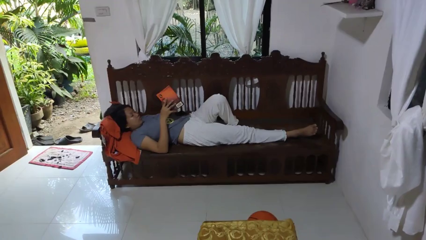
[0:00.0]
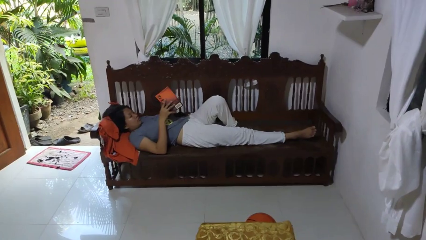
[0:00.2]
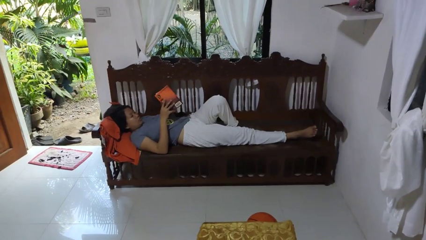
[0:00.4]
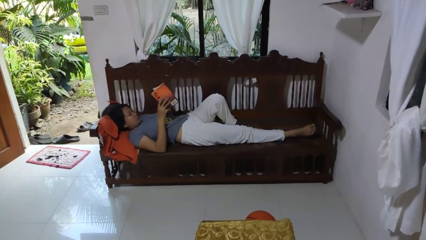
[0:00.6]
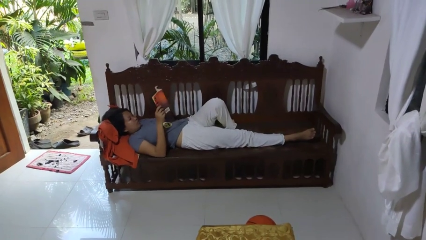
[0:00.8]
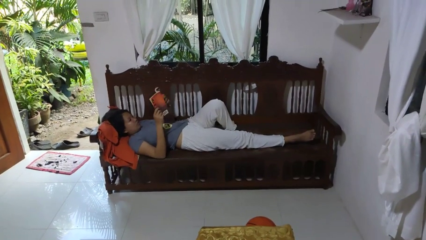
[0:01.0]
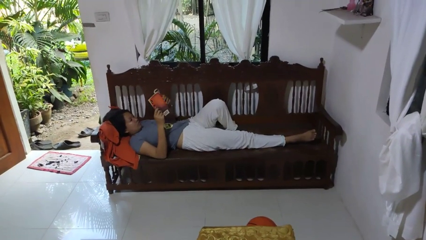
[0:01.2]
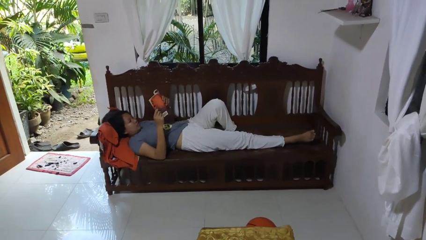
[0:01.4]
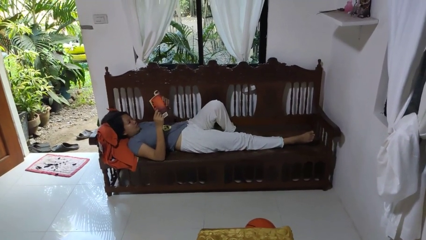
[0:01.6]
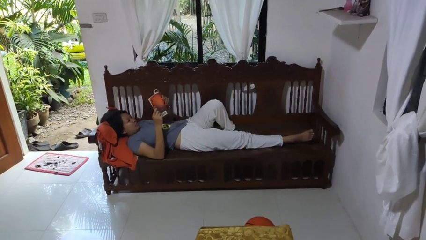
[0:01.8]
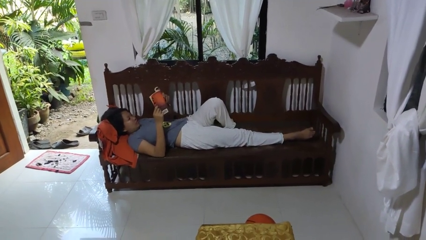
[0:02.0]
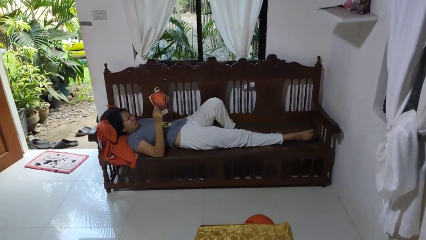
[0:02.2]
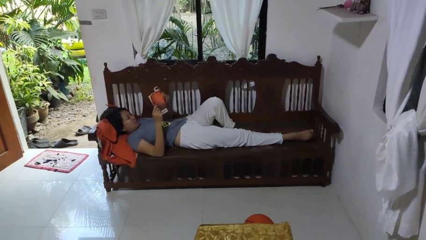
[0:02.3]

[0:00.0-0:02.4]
person reads book

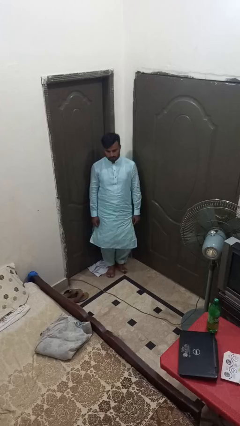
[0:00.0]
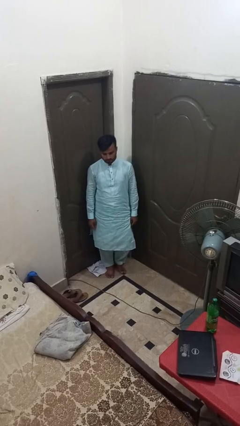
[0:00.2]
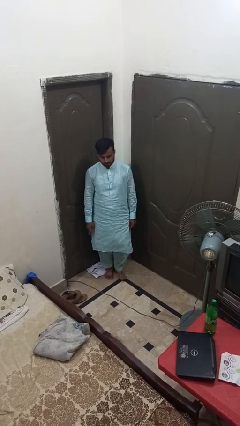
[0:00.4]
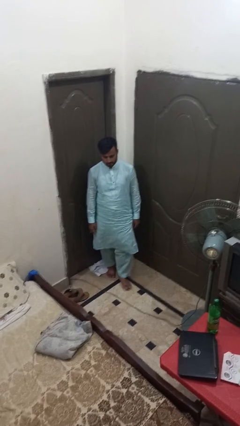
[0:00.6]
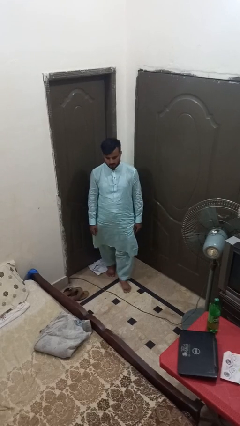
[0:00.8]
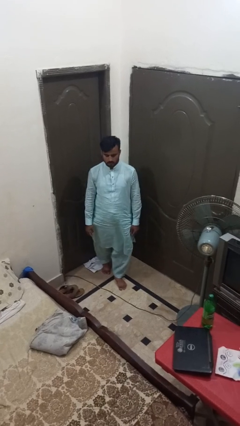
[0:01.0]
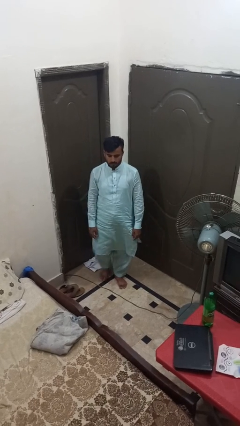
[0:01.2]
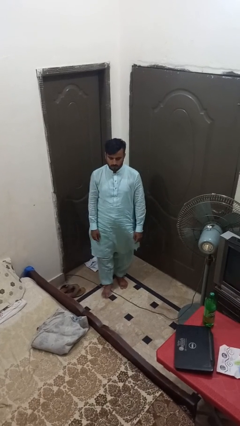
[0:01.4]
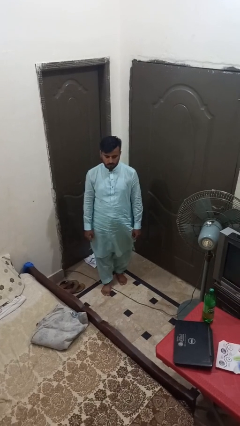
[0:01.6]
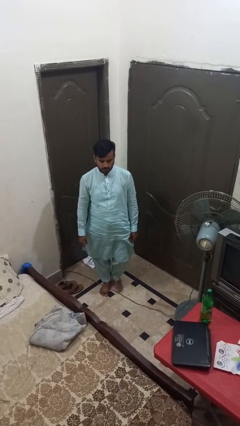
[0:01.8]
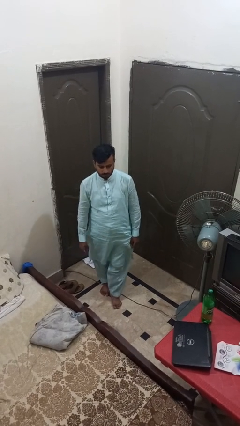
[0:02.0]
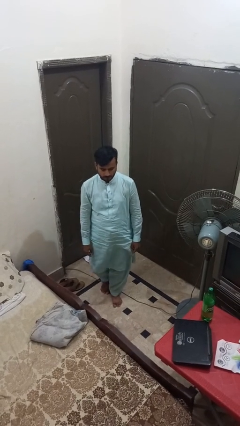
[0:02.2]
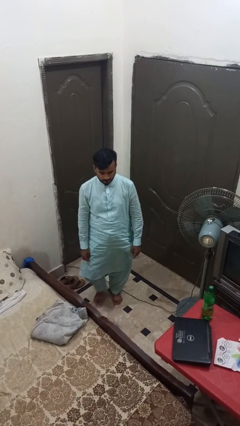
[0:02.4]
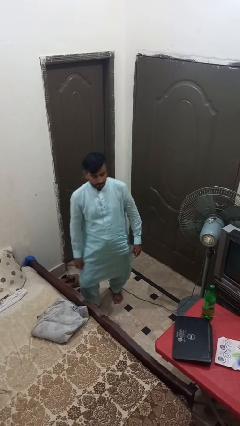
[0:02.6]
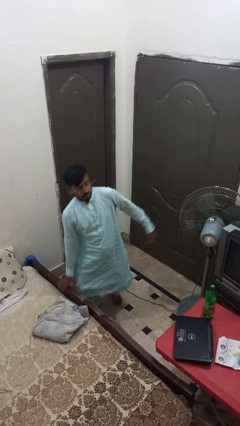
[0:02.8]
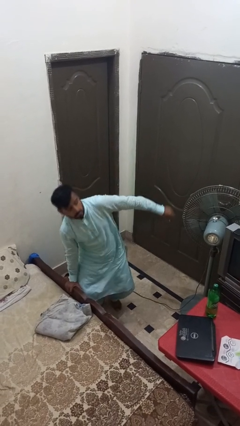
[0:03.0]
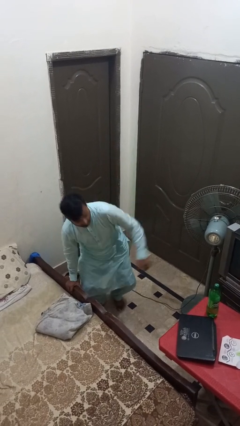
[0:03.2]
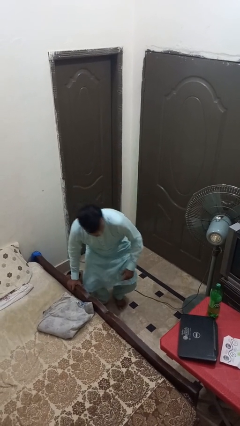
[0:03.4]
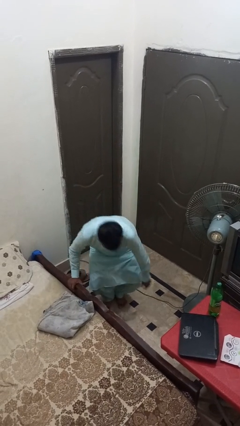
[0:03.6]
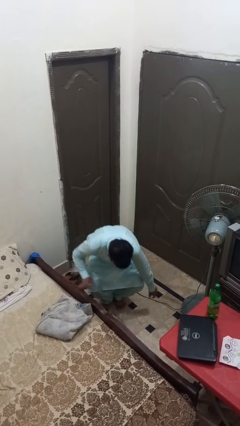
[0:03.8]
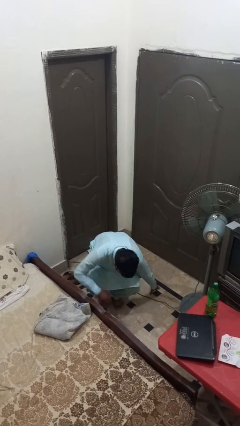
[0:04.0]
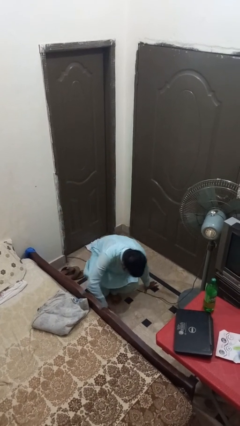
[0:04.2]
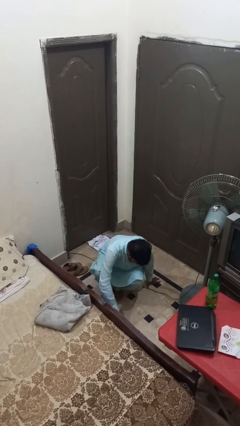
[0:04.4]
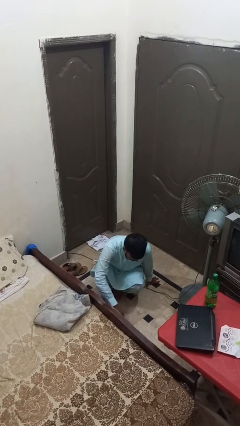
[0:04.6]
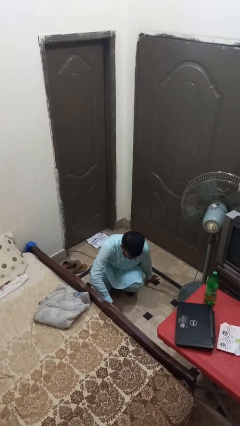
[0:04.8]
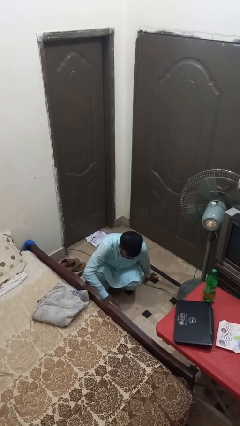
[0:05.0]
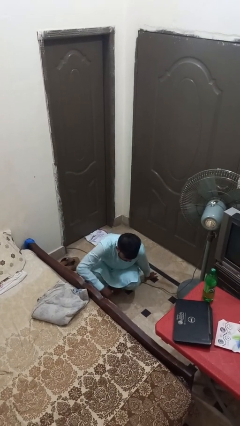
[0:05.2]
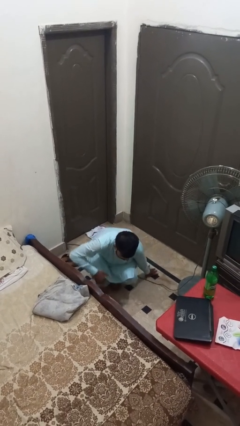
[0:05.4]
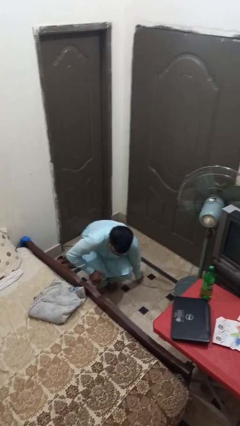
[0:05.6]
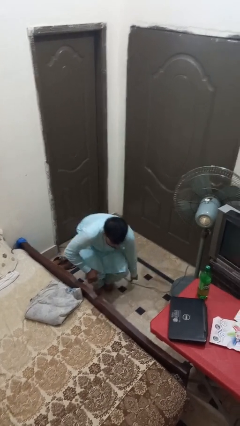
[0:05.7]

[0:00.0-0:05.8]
person trips on object on floor

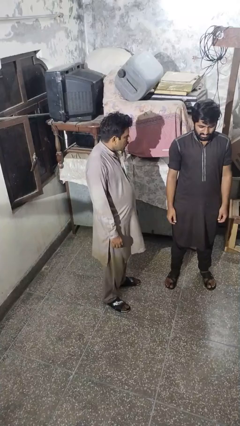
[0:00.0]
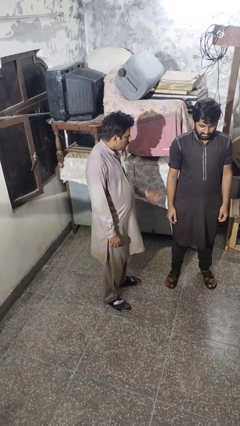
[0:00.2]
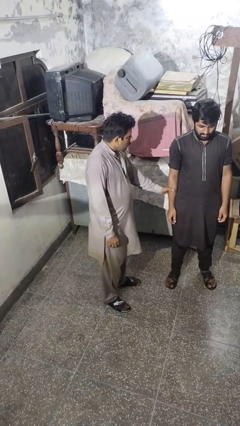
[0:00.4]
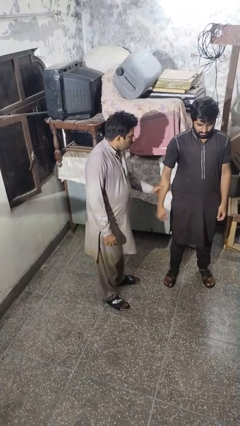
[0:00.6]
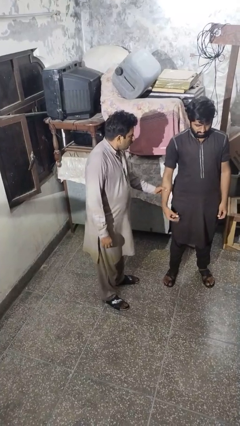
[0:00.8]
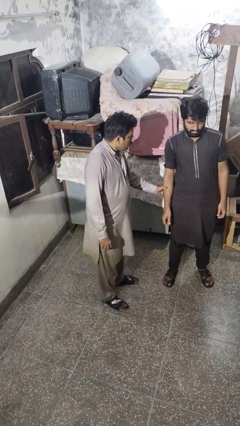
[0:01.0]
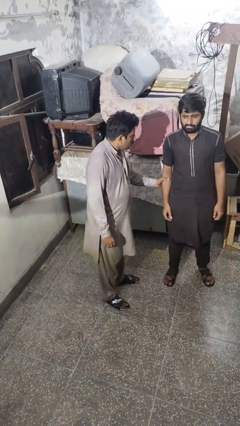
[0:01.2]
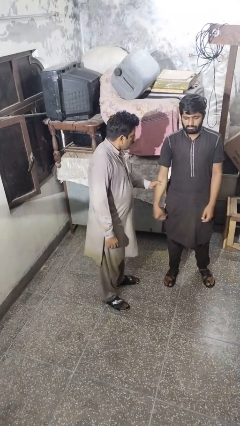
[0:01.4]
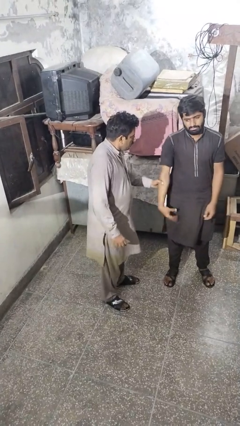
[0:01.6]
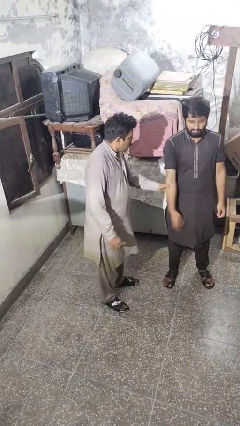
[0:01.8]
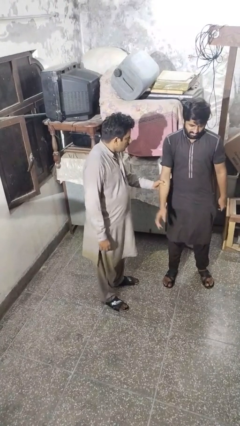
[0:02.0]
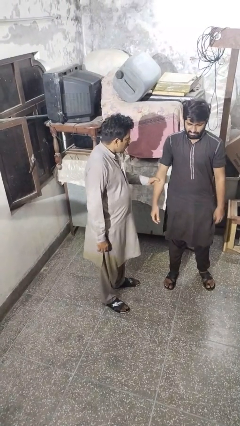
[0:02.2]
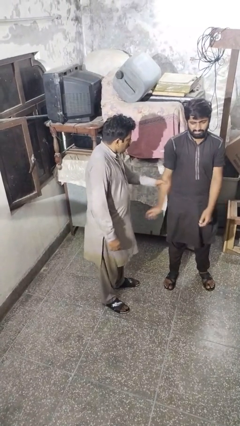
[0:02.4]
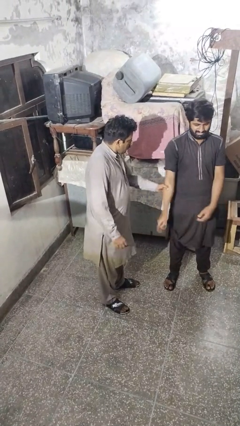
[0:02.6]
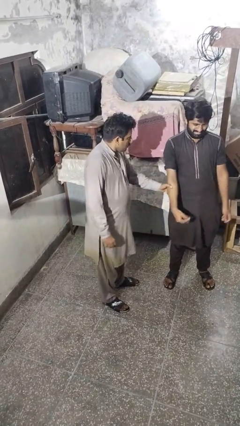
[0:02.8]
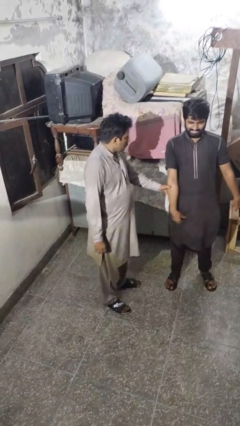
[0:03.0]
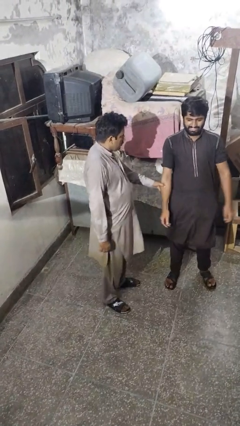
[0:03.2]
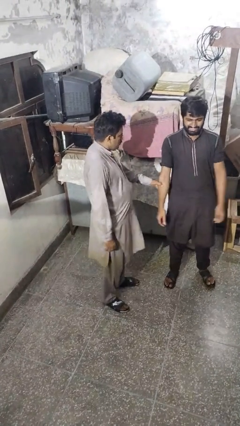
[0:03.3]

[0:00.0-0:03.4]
person grabs person by forearm

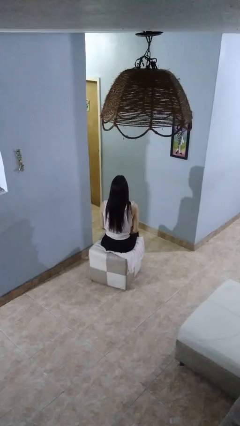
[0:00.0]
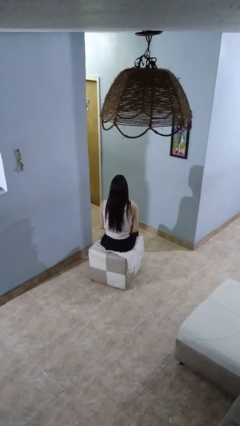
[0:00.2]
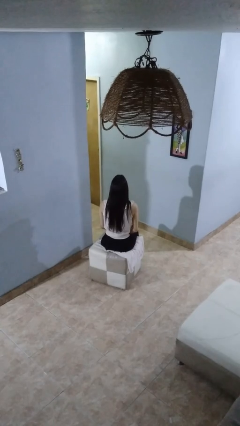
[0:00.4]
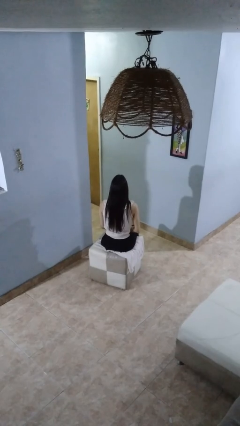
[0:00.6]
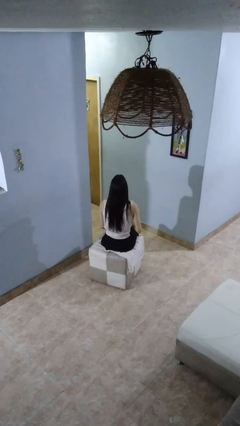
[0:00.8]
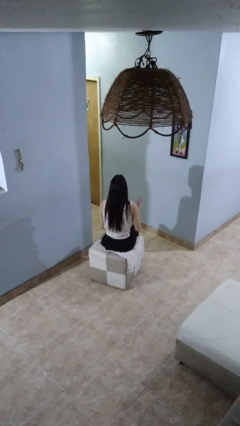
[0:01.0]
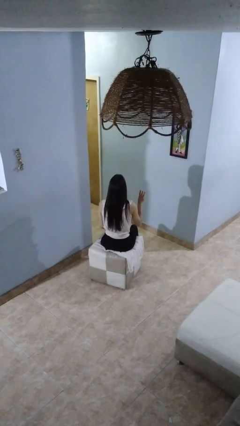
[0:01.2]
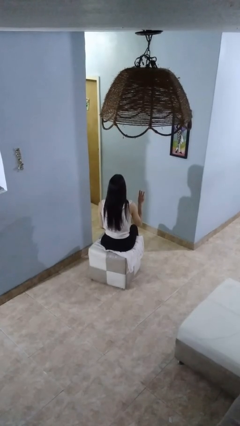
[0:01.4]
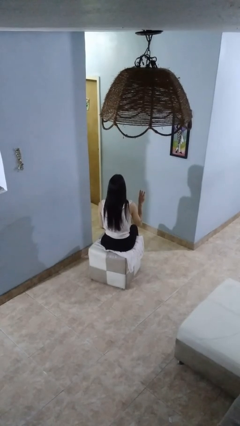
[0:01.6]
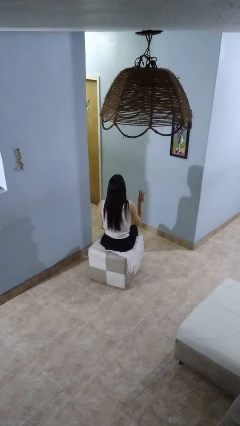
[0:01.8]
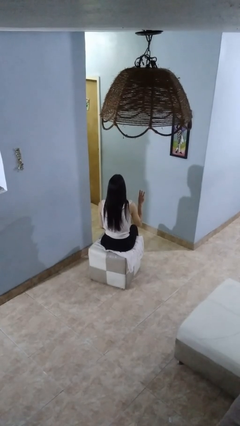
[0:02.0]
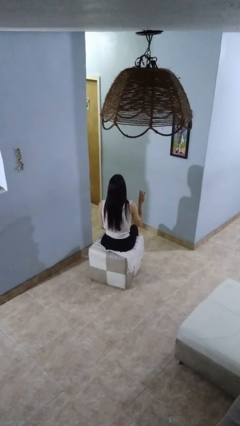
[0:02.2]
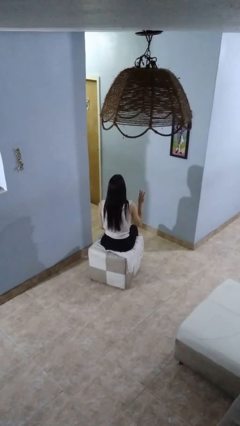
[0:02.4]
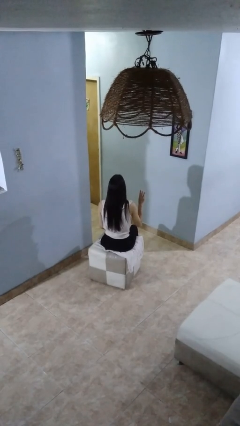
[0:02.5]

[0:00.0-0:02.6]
person gestures number three

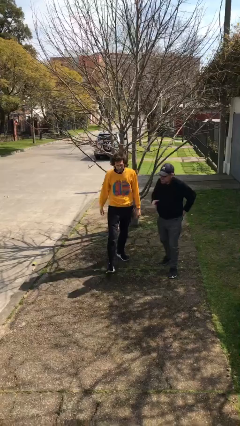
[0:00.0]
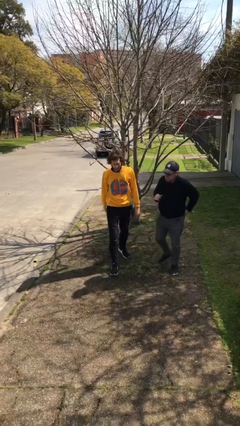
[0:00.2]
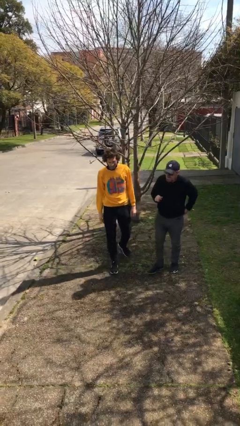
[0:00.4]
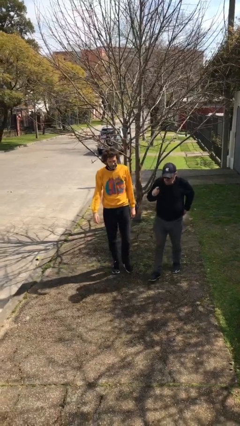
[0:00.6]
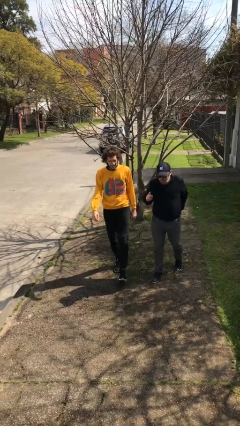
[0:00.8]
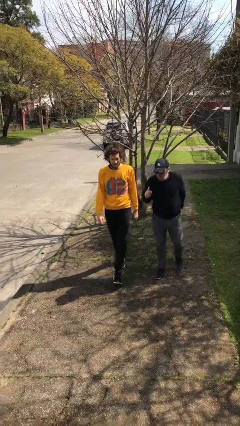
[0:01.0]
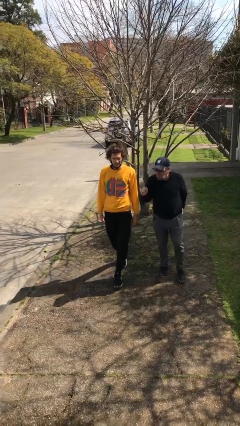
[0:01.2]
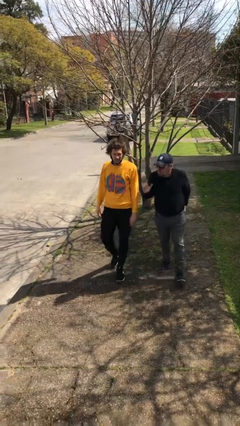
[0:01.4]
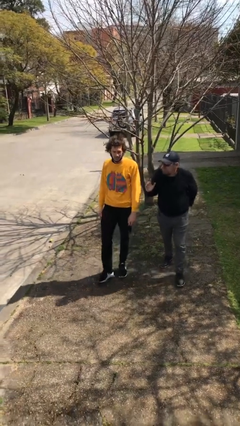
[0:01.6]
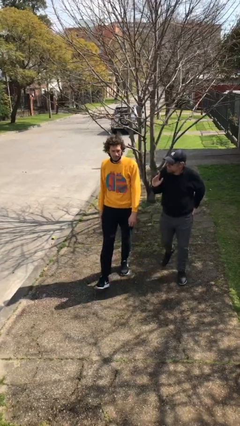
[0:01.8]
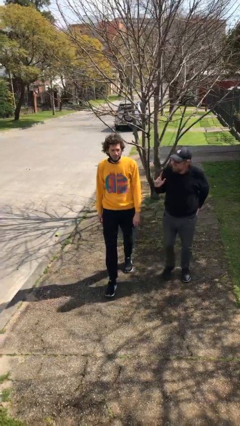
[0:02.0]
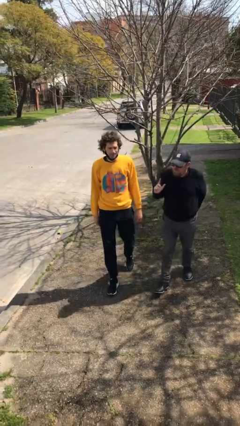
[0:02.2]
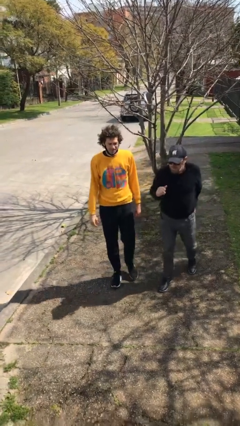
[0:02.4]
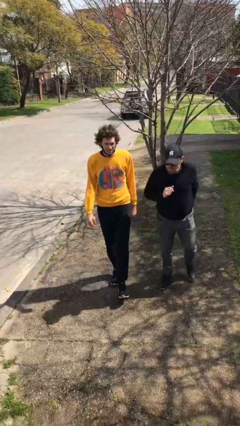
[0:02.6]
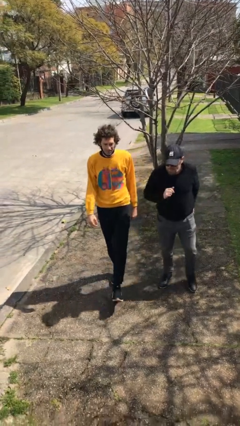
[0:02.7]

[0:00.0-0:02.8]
person talks to person

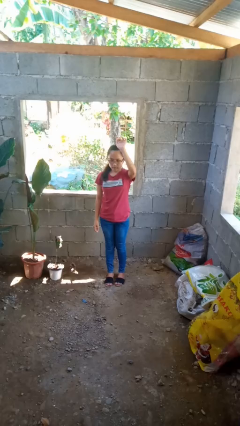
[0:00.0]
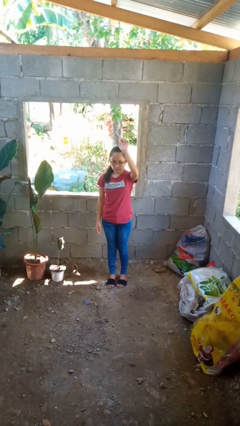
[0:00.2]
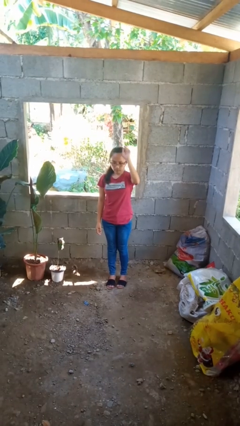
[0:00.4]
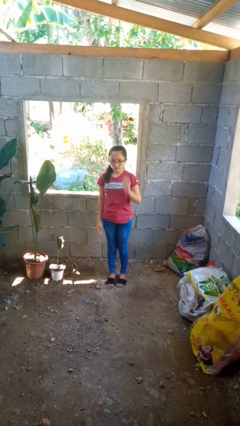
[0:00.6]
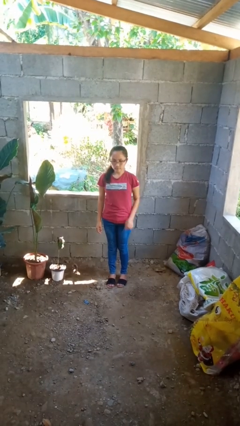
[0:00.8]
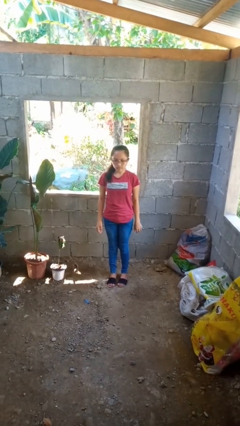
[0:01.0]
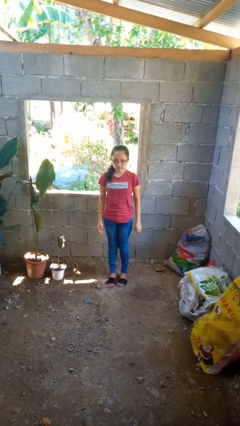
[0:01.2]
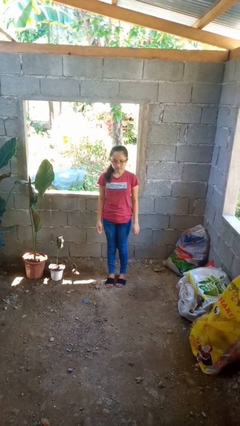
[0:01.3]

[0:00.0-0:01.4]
person gestures lower hand
